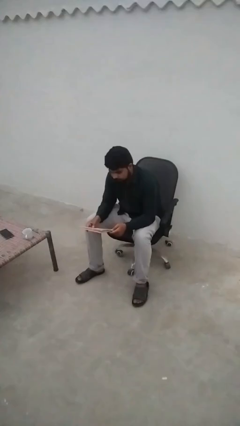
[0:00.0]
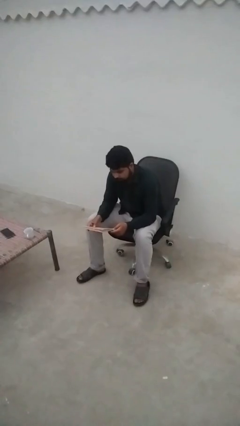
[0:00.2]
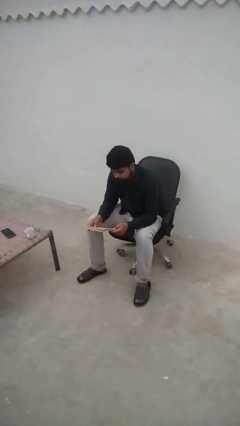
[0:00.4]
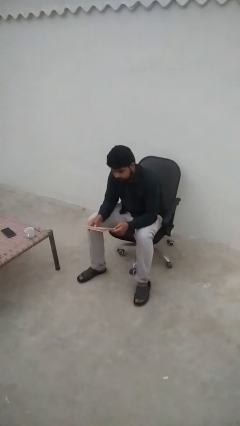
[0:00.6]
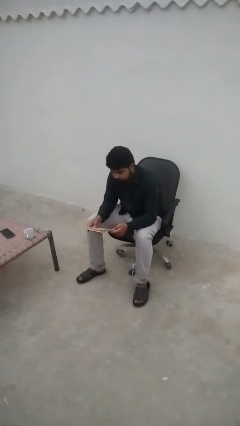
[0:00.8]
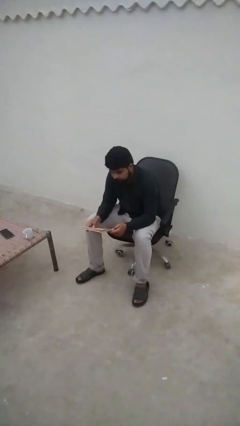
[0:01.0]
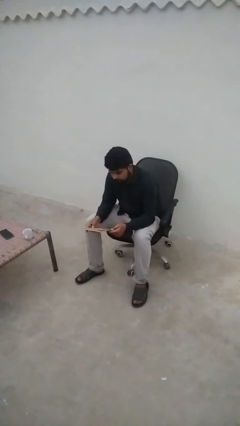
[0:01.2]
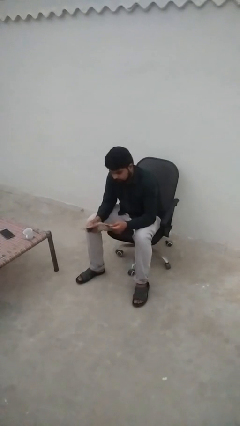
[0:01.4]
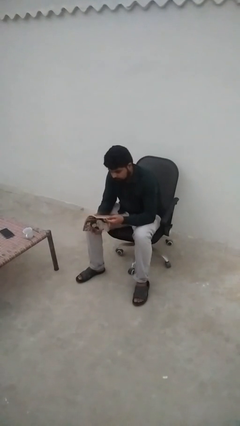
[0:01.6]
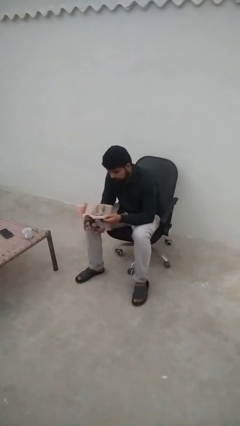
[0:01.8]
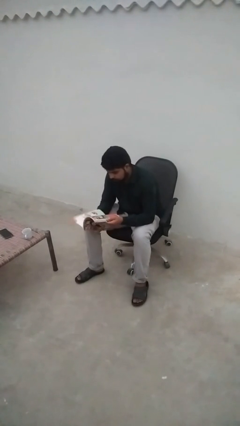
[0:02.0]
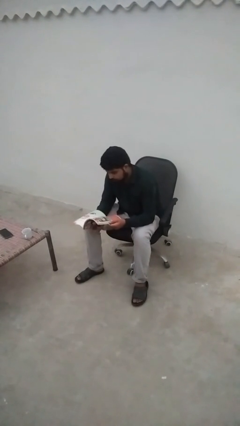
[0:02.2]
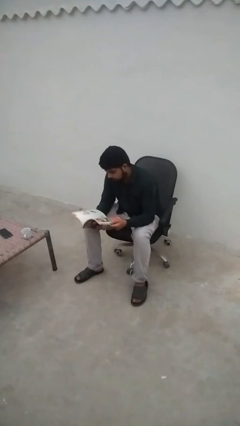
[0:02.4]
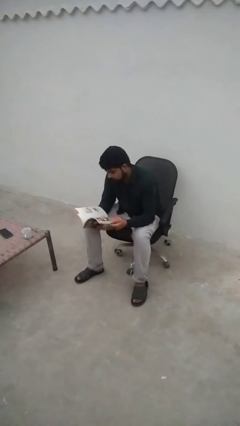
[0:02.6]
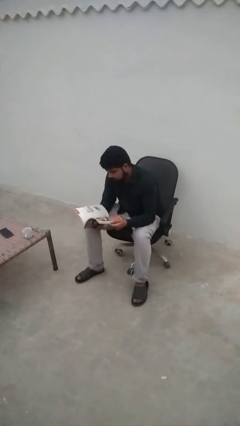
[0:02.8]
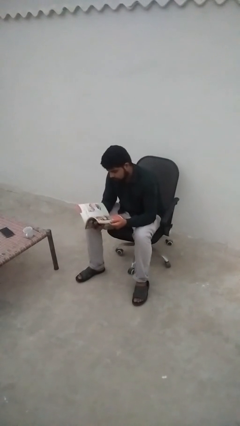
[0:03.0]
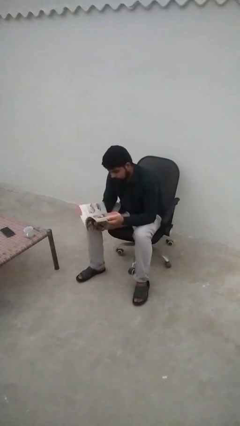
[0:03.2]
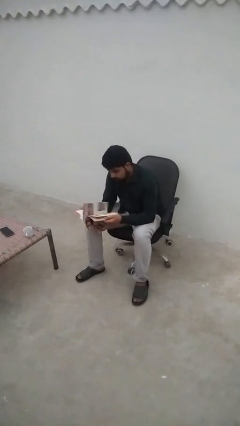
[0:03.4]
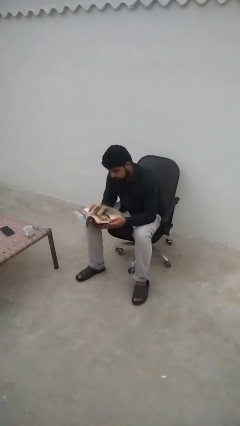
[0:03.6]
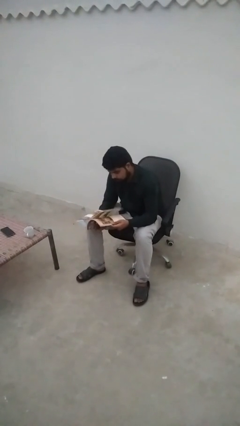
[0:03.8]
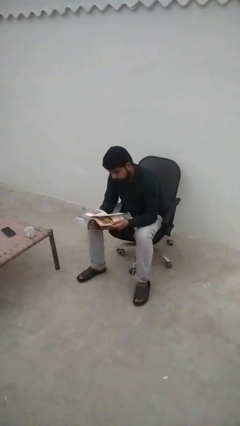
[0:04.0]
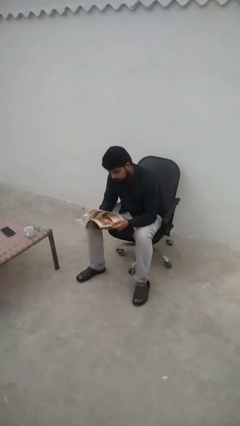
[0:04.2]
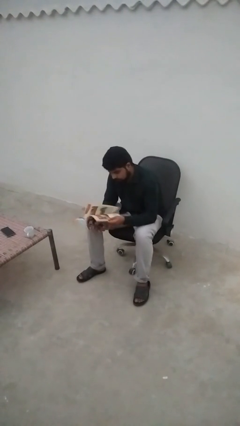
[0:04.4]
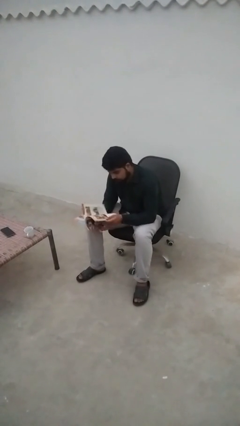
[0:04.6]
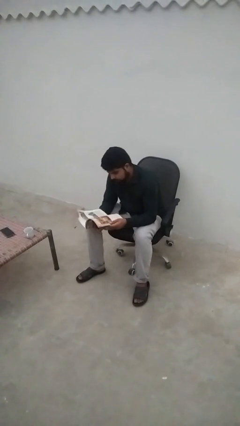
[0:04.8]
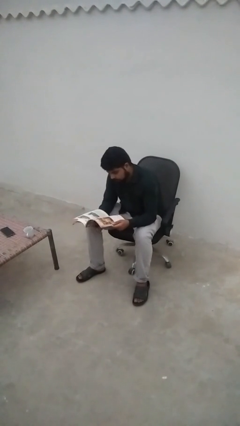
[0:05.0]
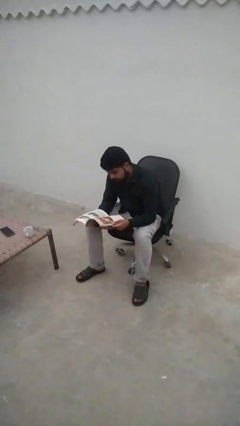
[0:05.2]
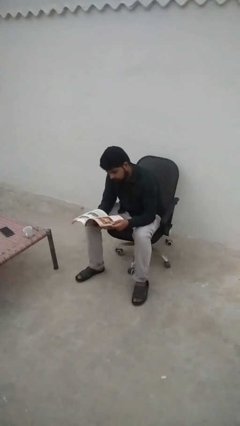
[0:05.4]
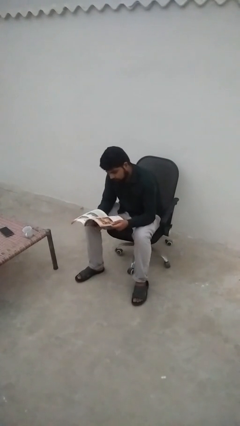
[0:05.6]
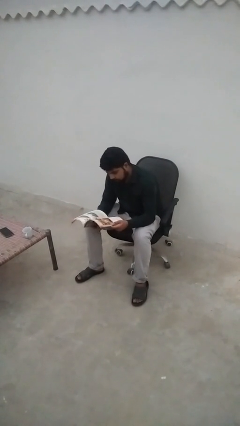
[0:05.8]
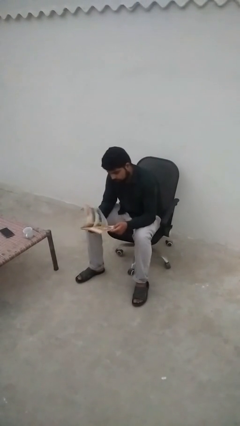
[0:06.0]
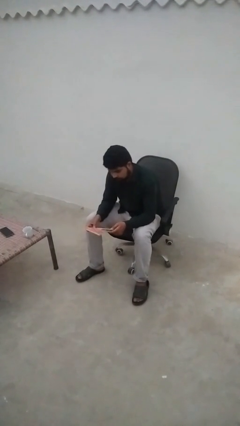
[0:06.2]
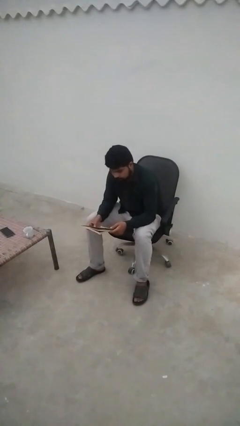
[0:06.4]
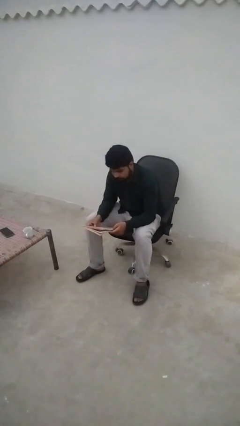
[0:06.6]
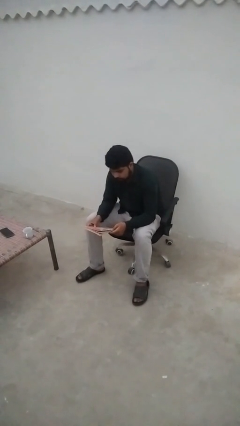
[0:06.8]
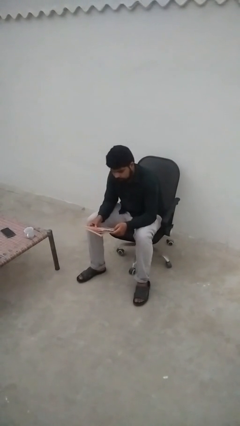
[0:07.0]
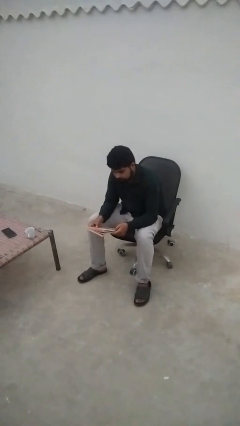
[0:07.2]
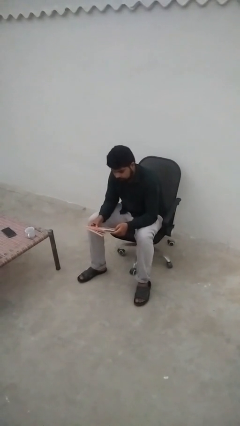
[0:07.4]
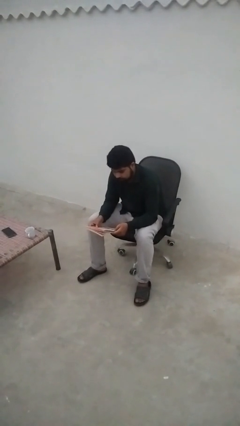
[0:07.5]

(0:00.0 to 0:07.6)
person reads magazine

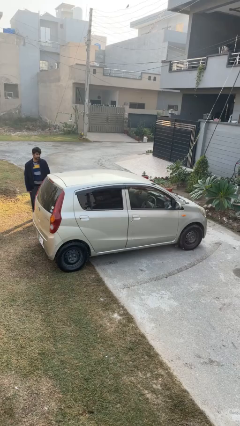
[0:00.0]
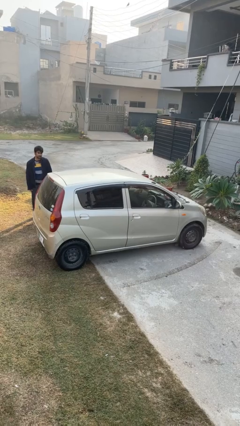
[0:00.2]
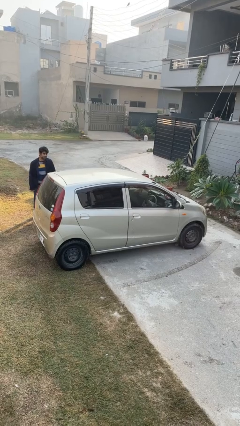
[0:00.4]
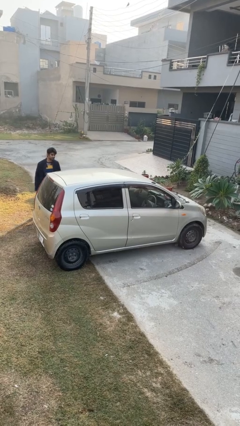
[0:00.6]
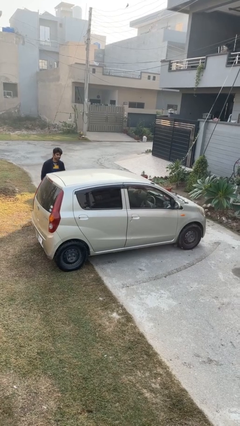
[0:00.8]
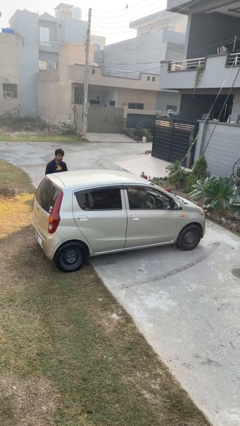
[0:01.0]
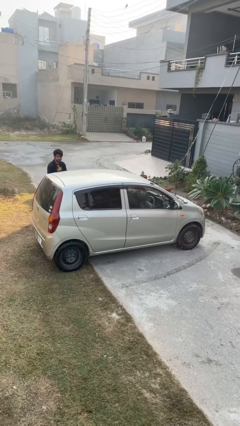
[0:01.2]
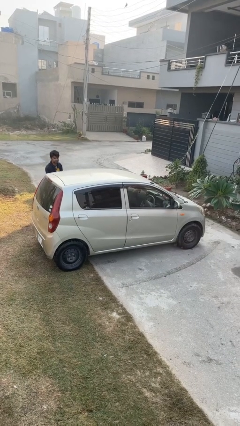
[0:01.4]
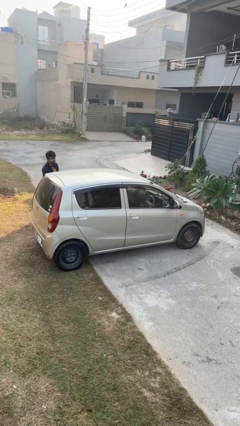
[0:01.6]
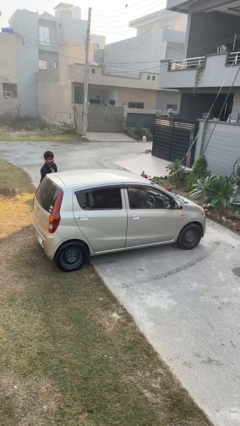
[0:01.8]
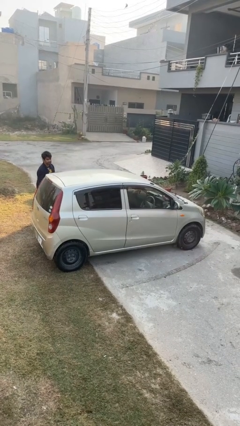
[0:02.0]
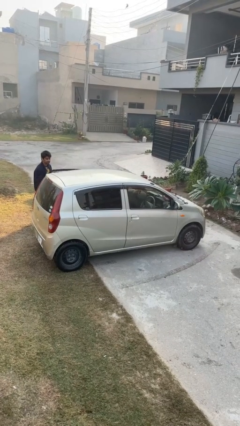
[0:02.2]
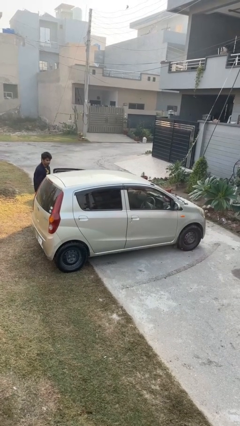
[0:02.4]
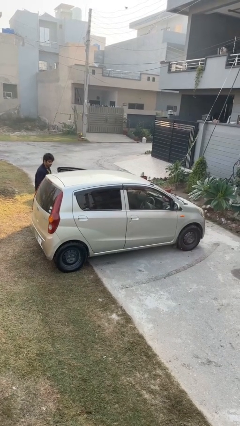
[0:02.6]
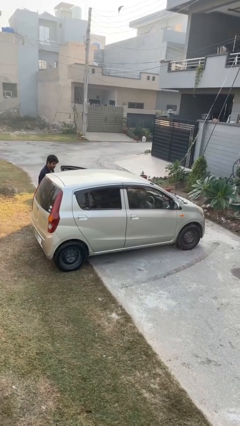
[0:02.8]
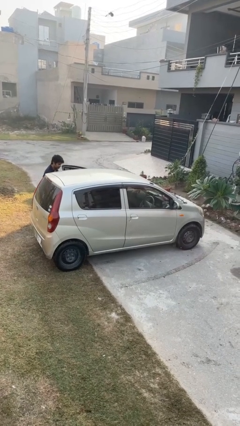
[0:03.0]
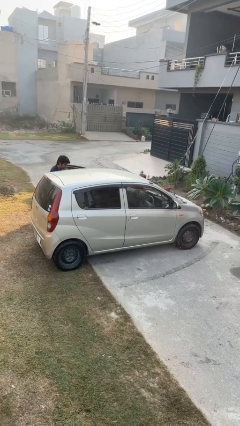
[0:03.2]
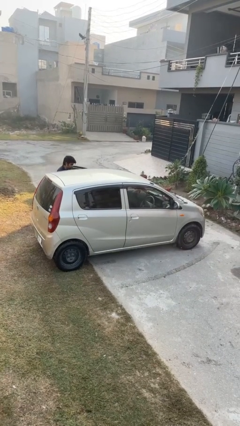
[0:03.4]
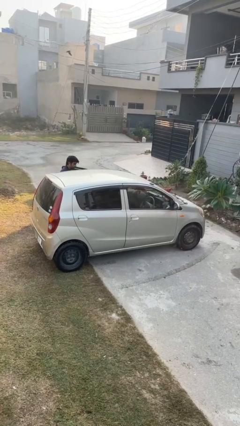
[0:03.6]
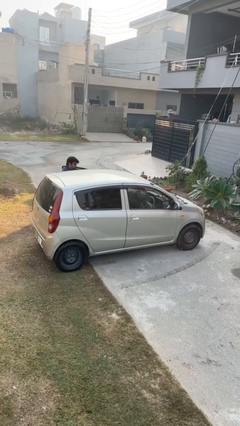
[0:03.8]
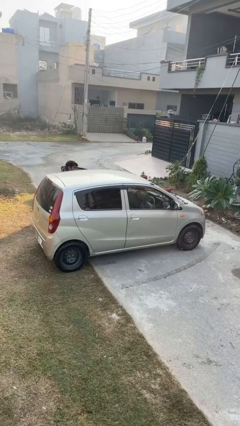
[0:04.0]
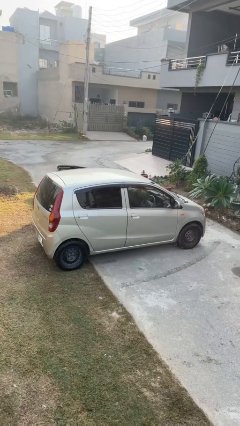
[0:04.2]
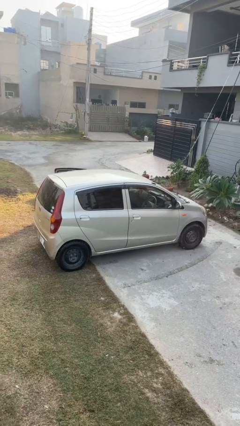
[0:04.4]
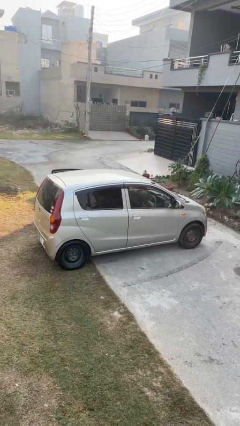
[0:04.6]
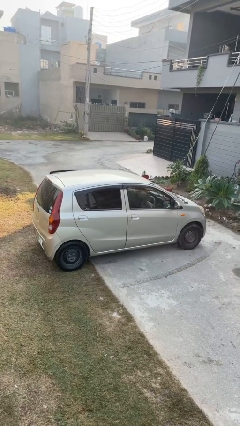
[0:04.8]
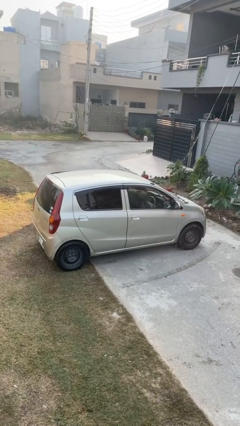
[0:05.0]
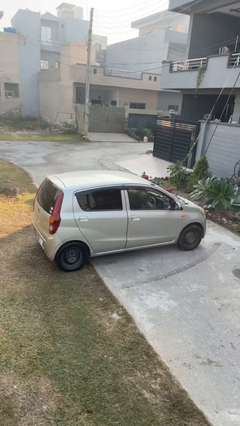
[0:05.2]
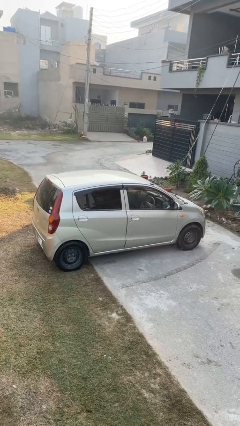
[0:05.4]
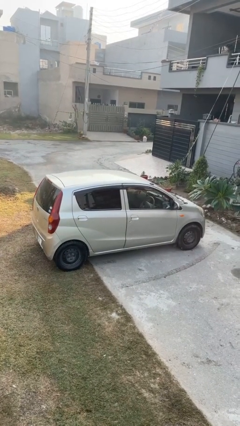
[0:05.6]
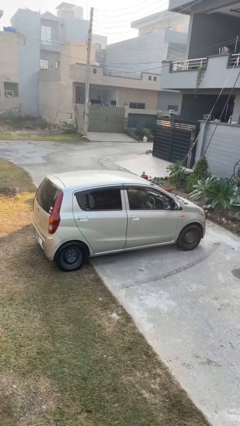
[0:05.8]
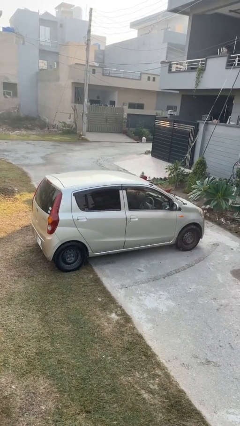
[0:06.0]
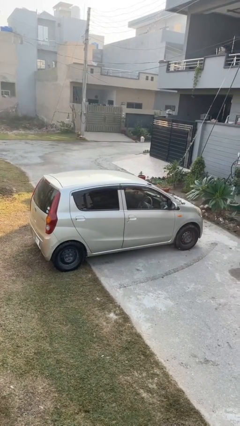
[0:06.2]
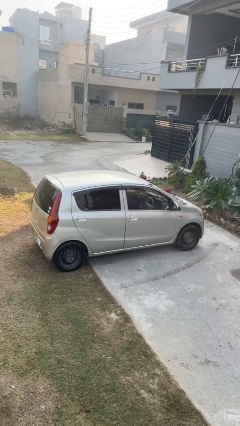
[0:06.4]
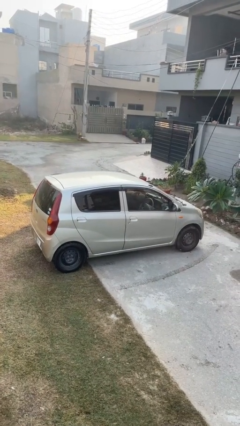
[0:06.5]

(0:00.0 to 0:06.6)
car picks up person

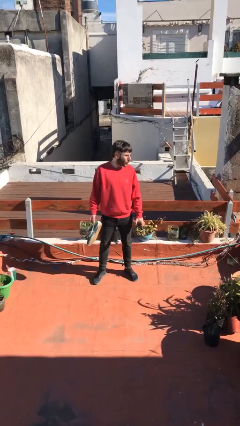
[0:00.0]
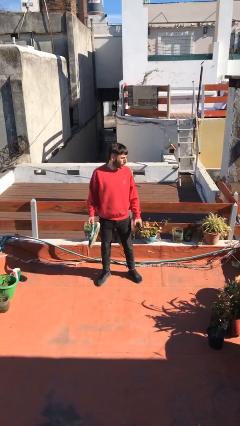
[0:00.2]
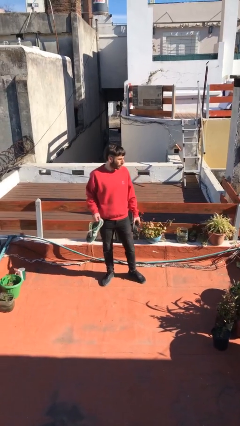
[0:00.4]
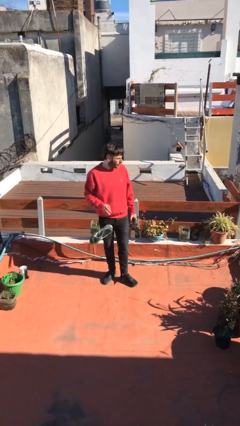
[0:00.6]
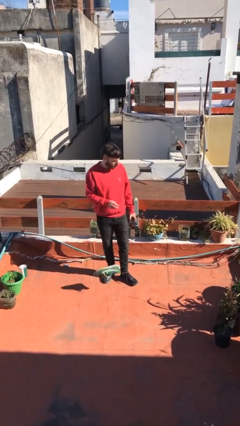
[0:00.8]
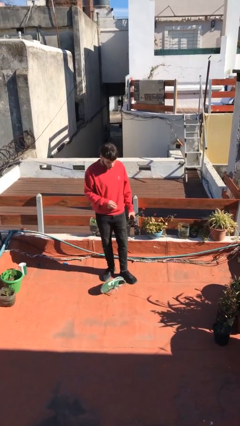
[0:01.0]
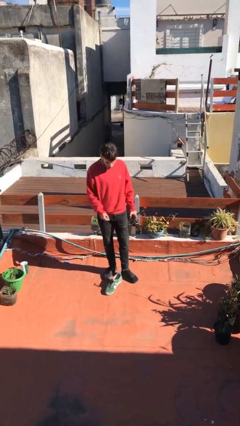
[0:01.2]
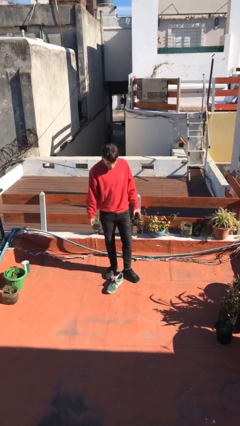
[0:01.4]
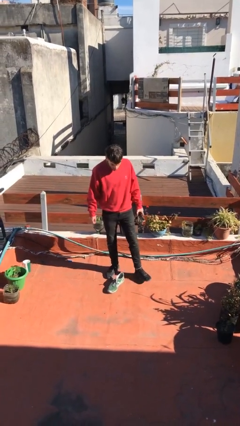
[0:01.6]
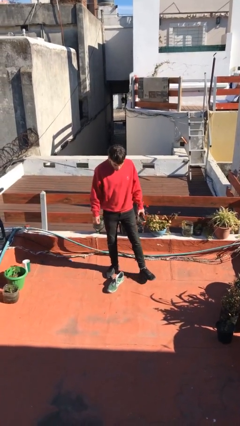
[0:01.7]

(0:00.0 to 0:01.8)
person drops object

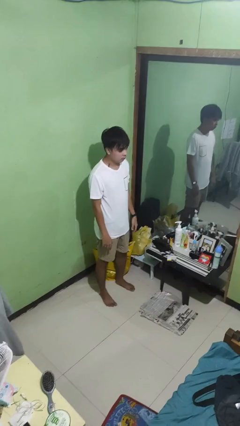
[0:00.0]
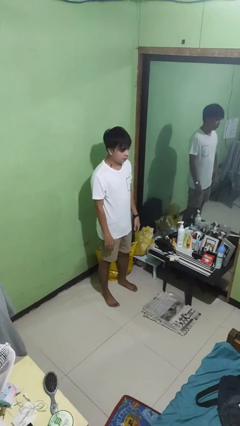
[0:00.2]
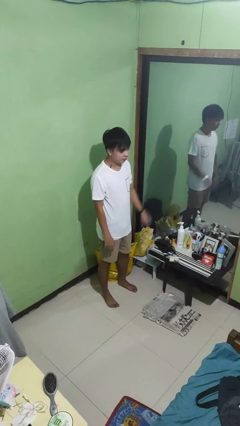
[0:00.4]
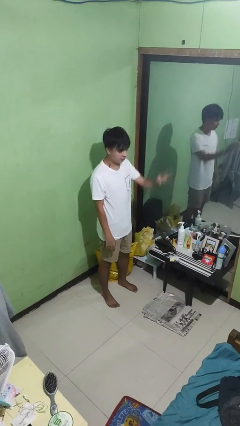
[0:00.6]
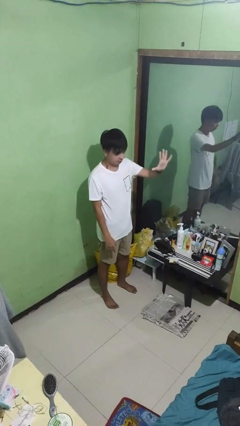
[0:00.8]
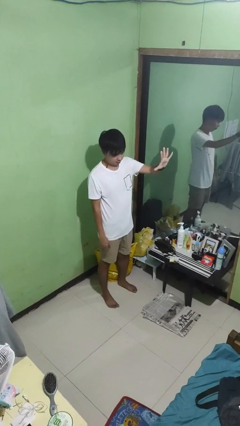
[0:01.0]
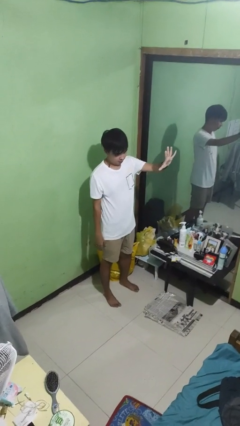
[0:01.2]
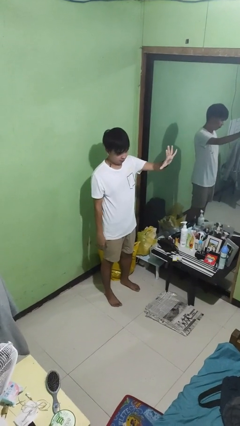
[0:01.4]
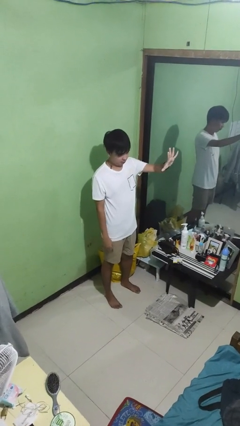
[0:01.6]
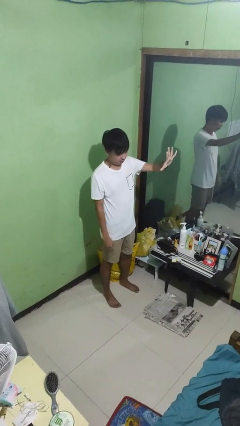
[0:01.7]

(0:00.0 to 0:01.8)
person gestures number five
